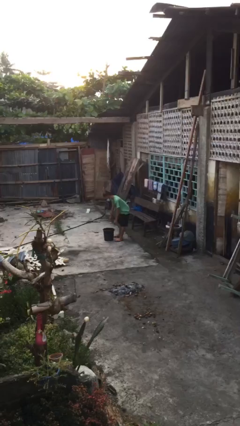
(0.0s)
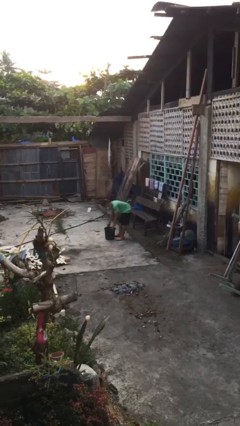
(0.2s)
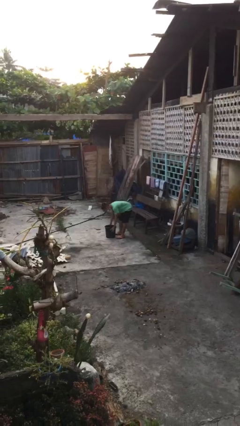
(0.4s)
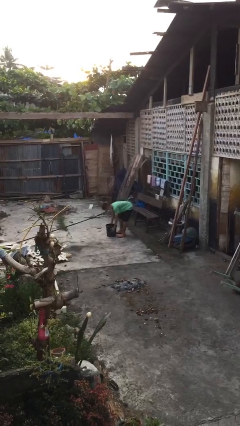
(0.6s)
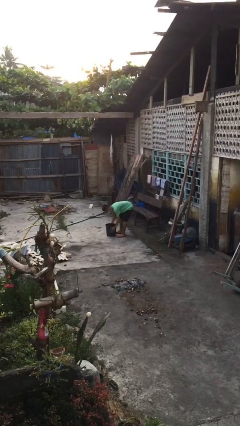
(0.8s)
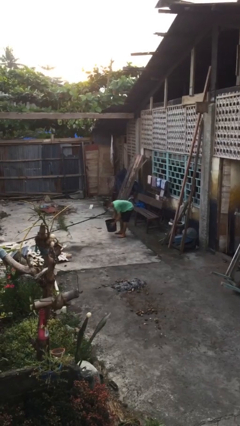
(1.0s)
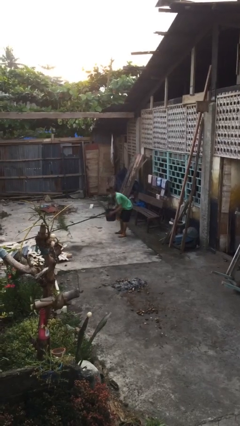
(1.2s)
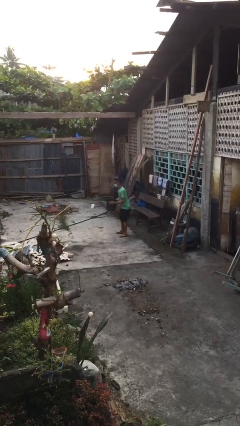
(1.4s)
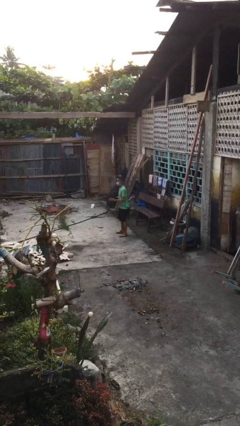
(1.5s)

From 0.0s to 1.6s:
person picks up object from floor

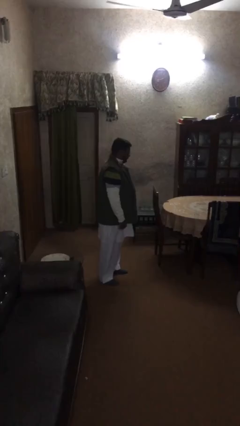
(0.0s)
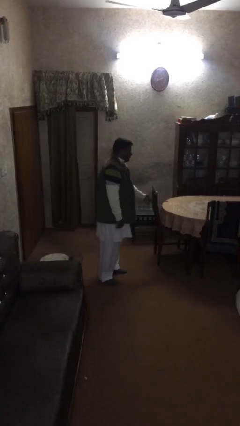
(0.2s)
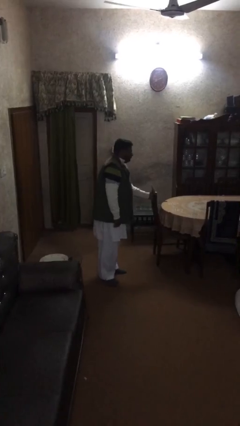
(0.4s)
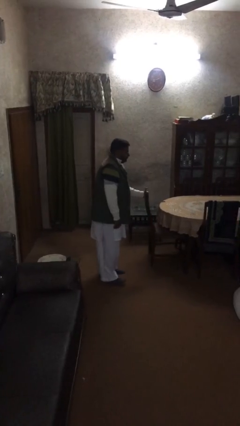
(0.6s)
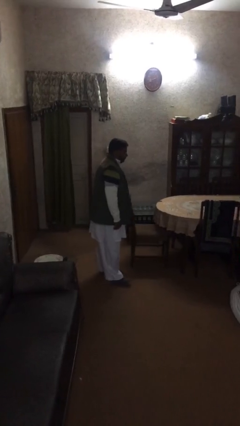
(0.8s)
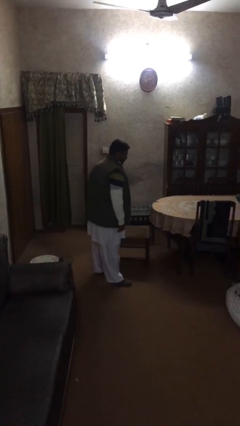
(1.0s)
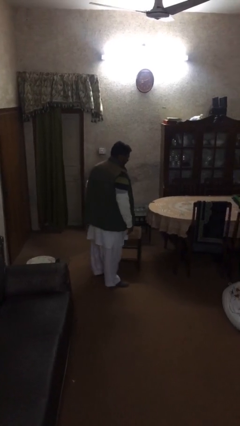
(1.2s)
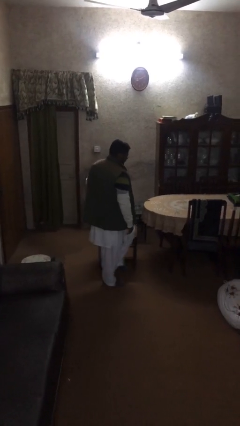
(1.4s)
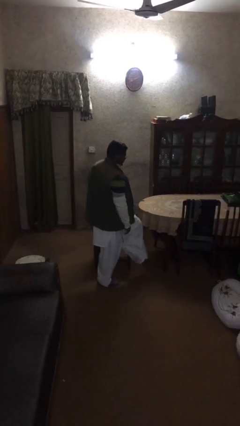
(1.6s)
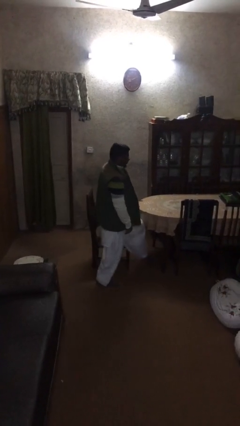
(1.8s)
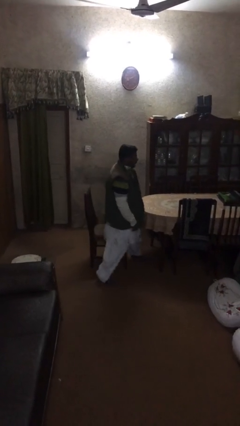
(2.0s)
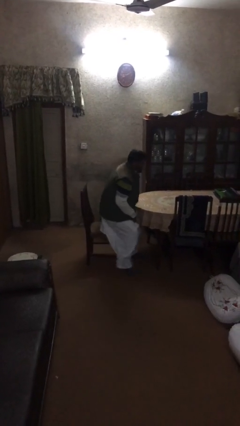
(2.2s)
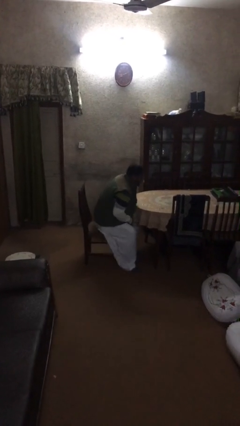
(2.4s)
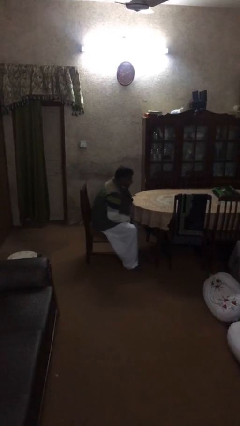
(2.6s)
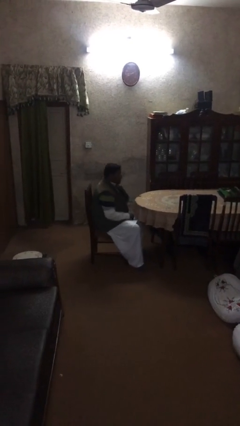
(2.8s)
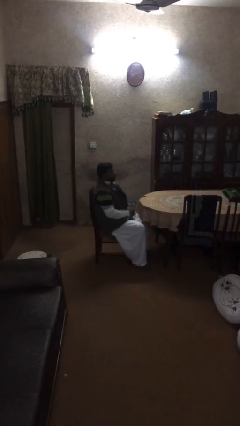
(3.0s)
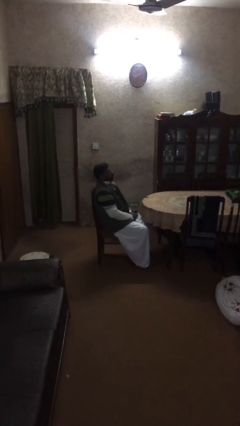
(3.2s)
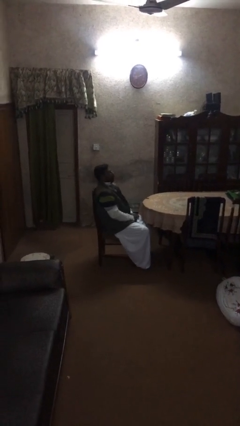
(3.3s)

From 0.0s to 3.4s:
person sits down

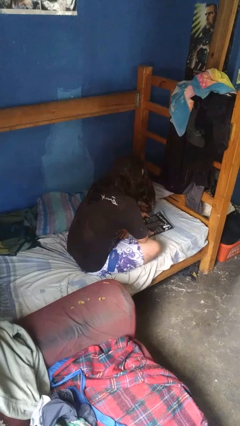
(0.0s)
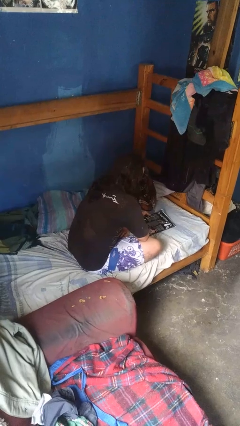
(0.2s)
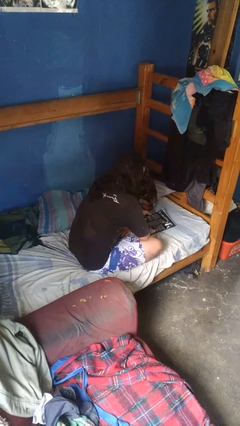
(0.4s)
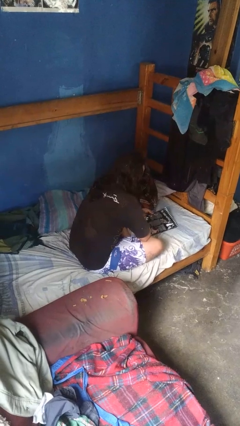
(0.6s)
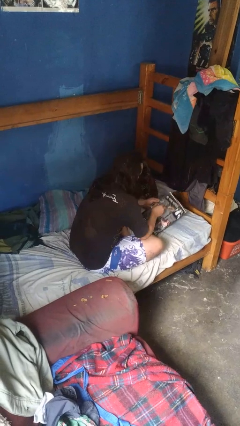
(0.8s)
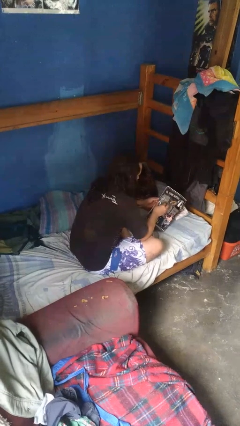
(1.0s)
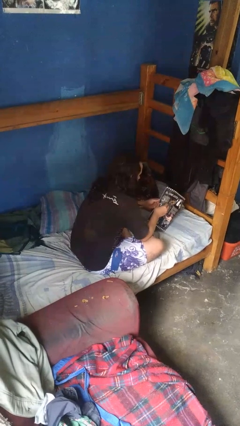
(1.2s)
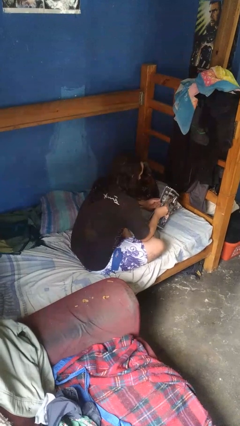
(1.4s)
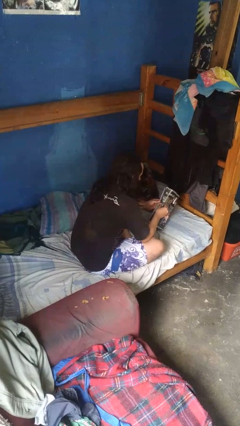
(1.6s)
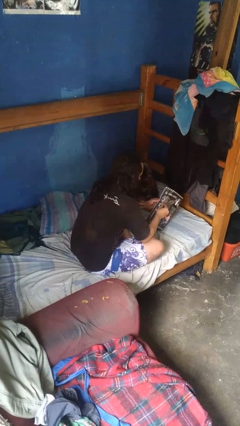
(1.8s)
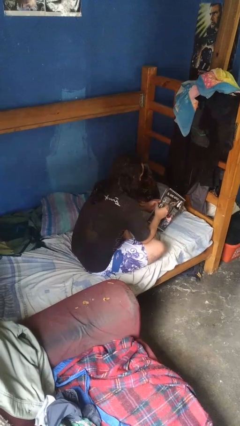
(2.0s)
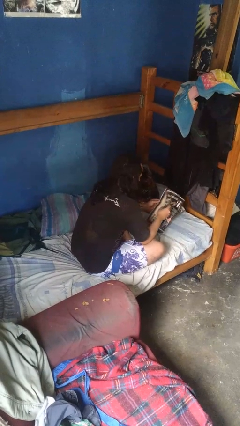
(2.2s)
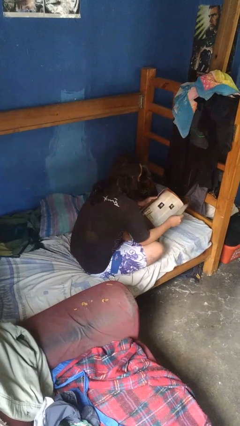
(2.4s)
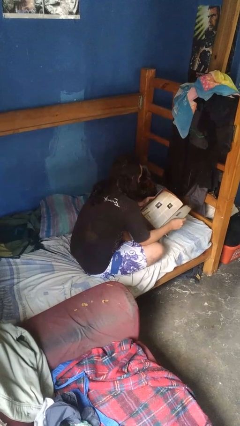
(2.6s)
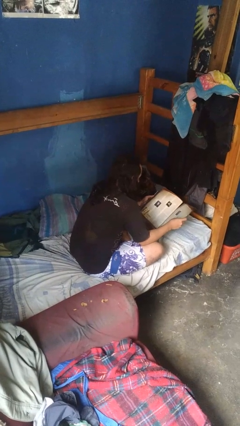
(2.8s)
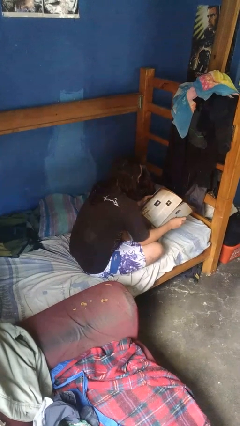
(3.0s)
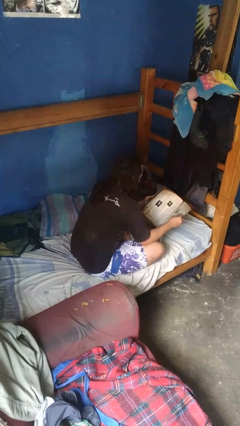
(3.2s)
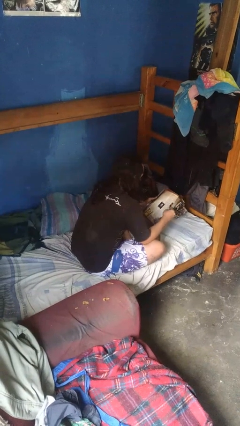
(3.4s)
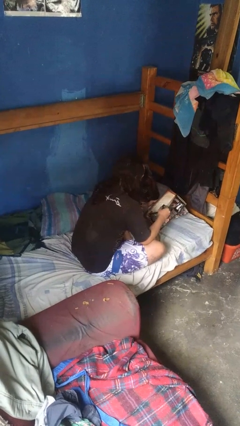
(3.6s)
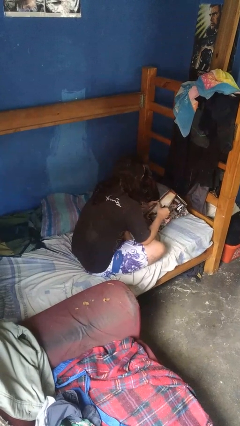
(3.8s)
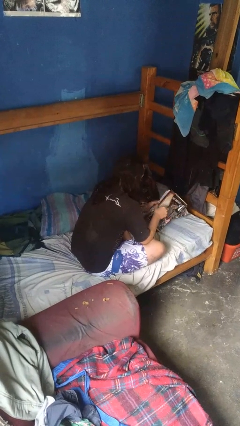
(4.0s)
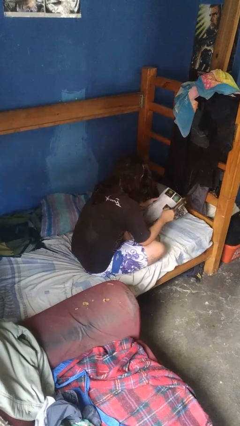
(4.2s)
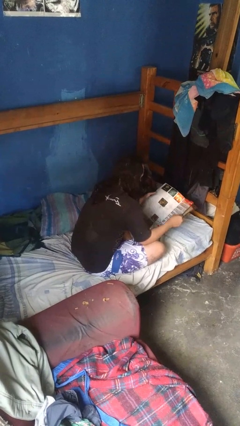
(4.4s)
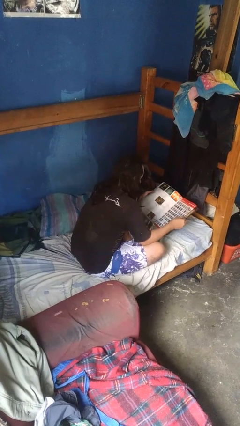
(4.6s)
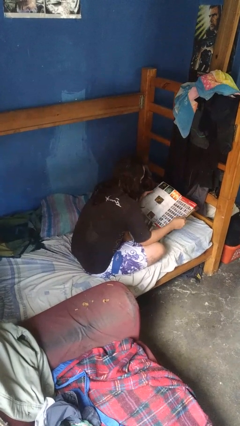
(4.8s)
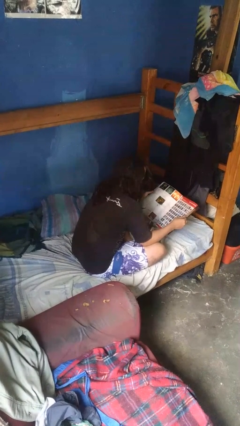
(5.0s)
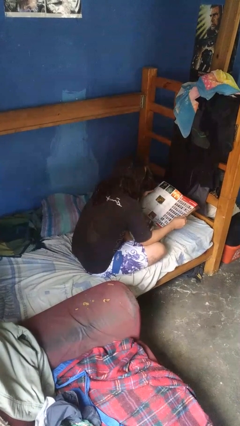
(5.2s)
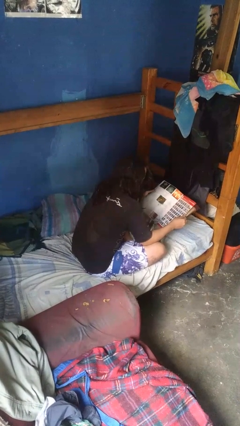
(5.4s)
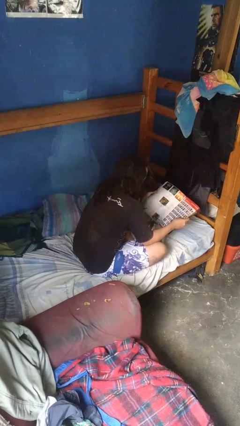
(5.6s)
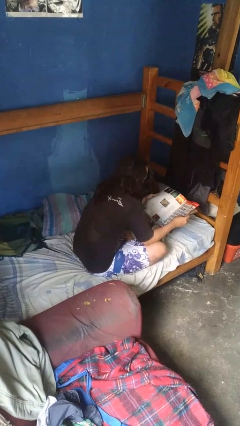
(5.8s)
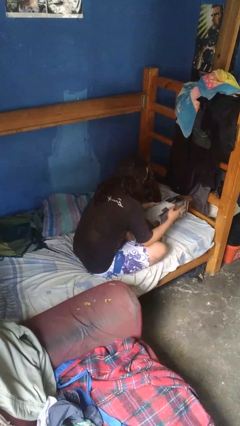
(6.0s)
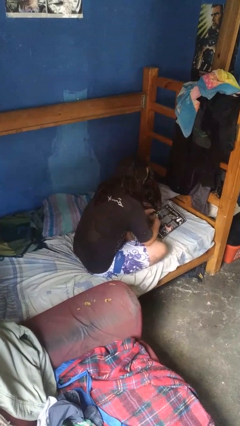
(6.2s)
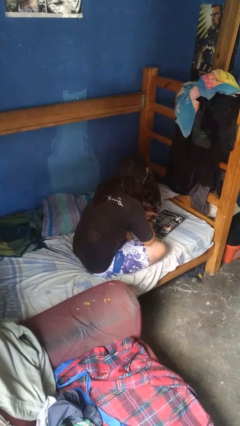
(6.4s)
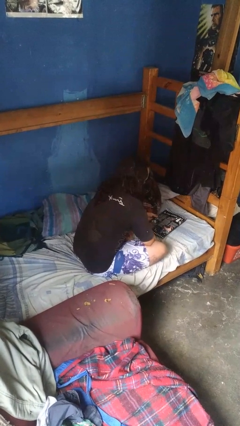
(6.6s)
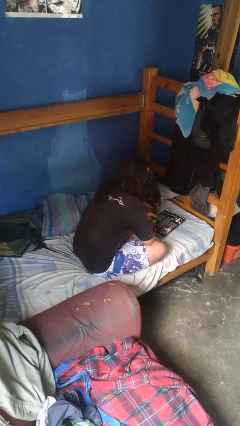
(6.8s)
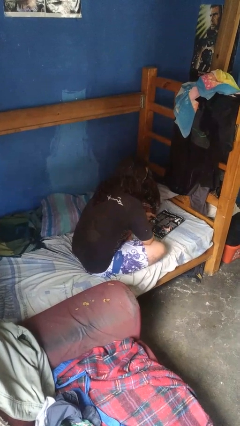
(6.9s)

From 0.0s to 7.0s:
person reads magazine

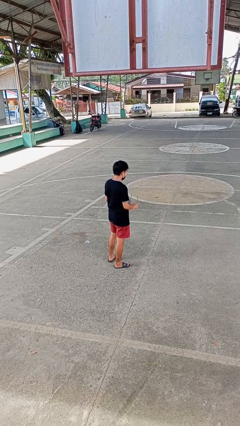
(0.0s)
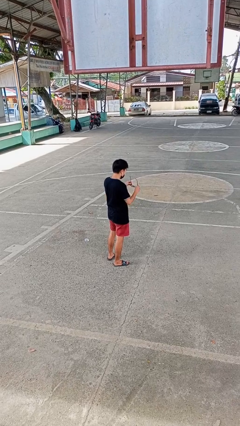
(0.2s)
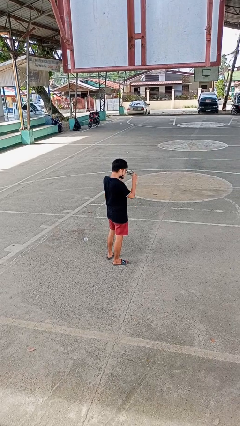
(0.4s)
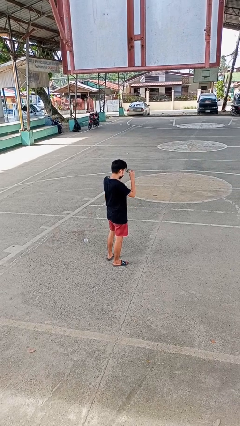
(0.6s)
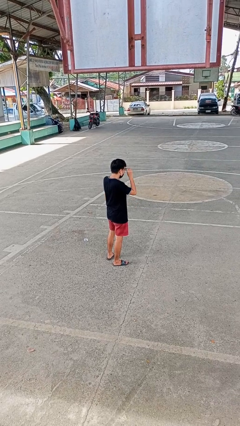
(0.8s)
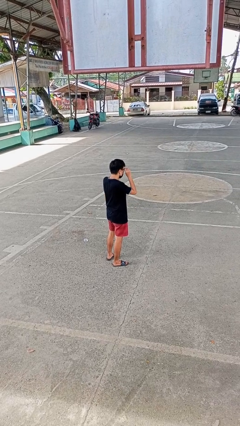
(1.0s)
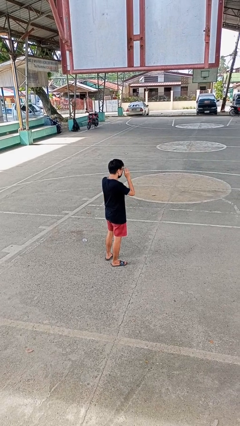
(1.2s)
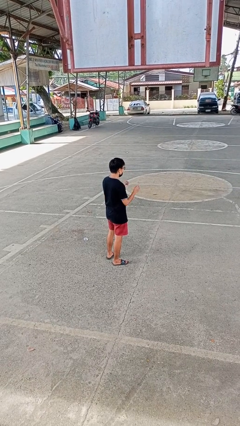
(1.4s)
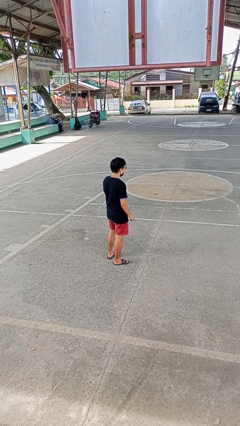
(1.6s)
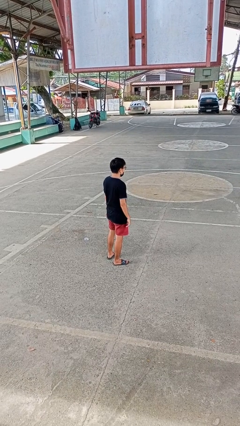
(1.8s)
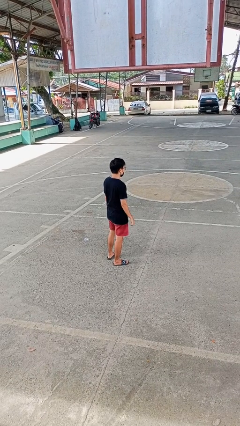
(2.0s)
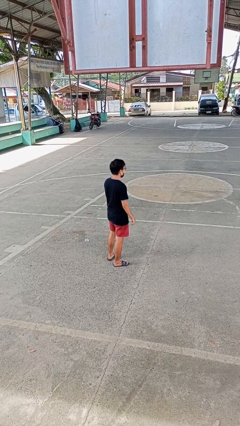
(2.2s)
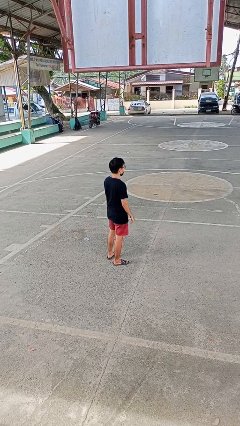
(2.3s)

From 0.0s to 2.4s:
person puts on glasses

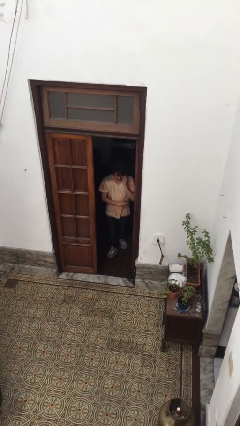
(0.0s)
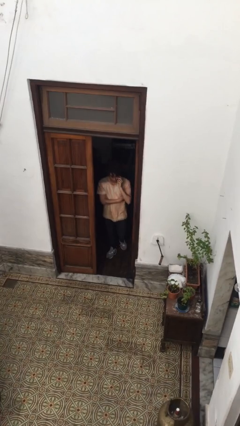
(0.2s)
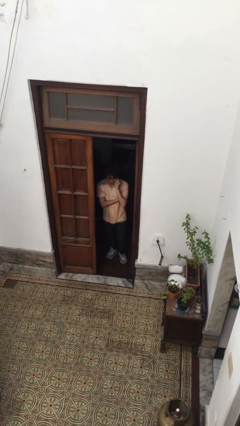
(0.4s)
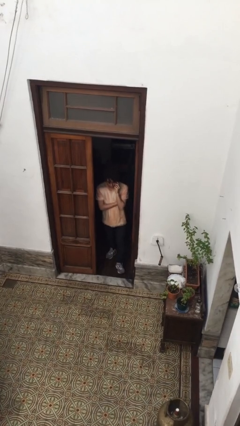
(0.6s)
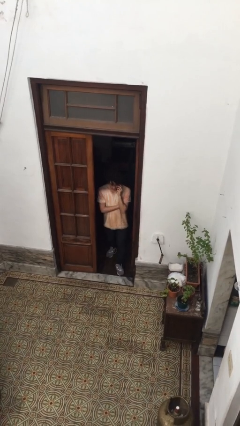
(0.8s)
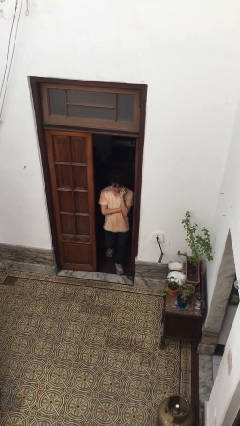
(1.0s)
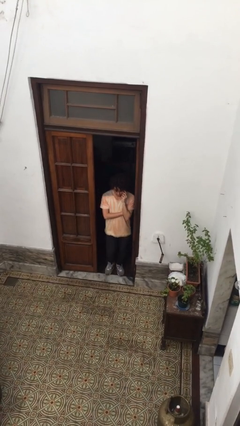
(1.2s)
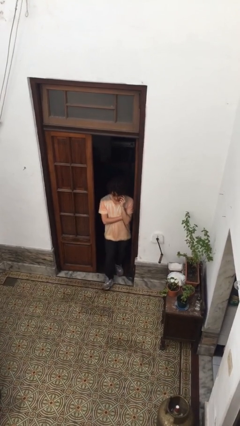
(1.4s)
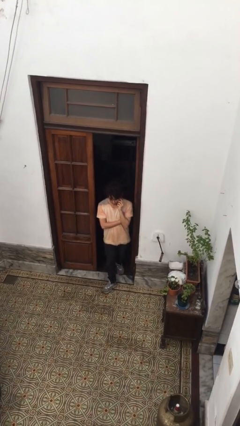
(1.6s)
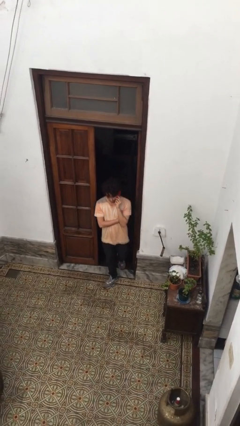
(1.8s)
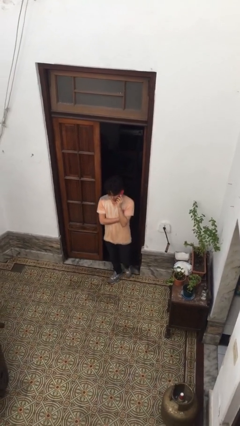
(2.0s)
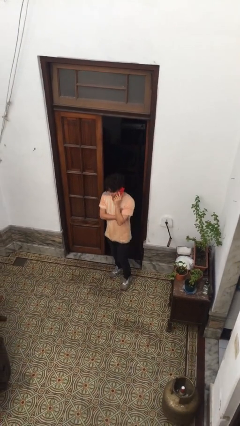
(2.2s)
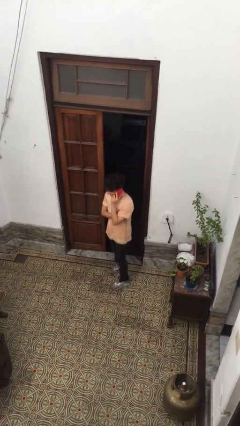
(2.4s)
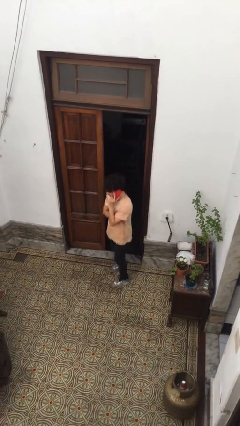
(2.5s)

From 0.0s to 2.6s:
person enters scene through structure

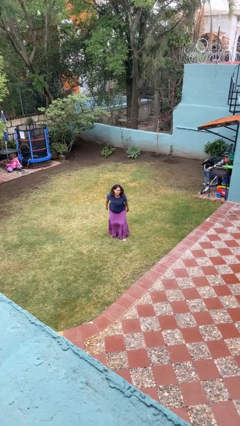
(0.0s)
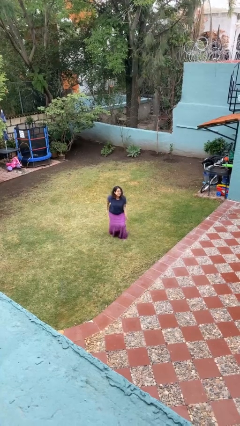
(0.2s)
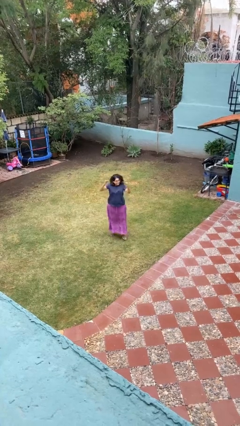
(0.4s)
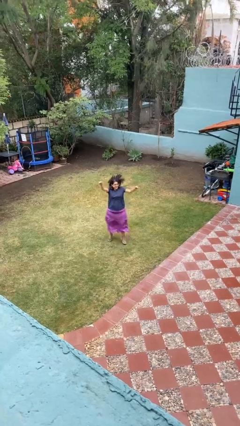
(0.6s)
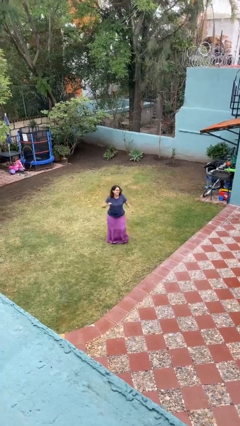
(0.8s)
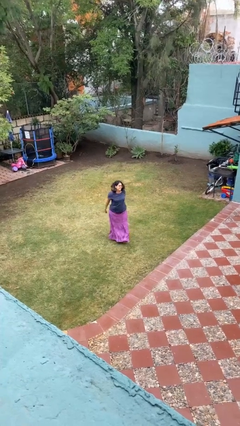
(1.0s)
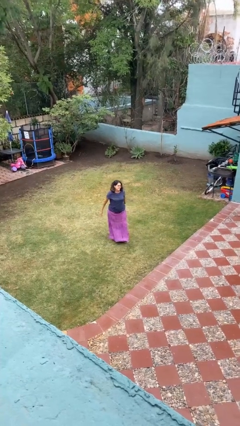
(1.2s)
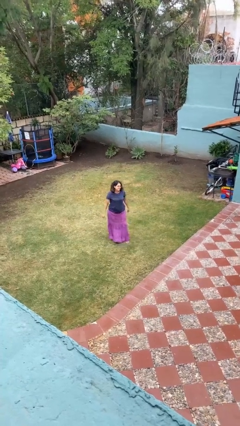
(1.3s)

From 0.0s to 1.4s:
person jumps
